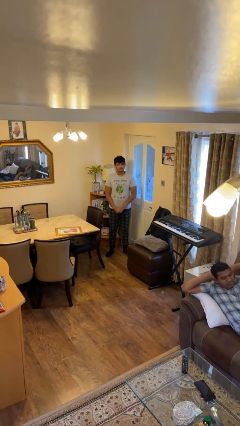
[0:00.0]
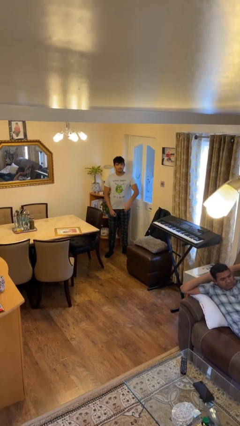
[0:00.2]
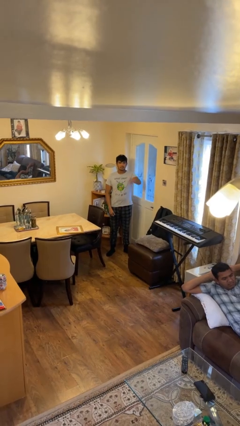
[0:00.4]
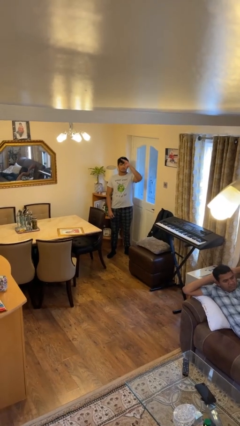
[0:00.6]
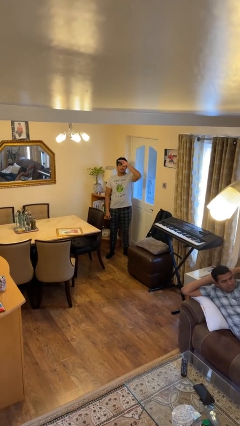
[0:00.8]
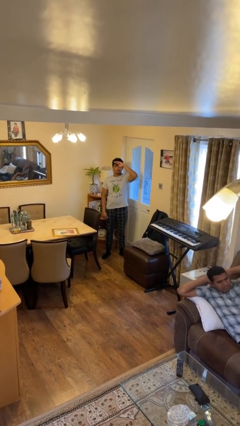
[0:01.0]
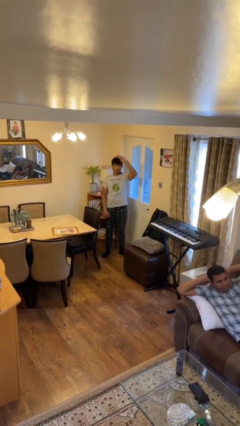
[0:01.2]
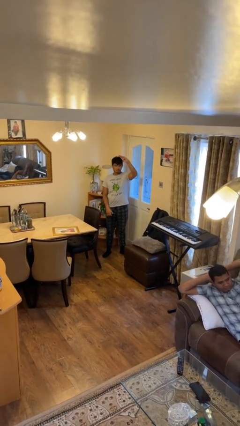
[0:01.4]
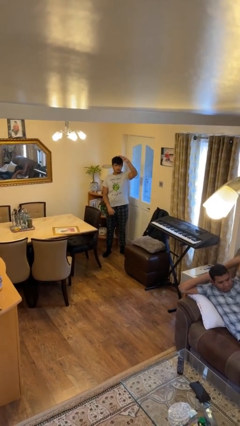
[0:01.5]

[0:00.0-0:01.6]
person salutes

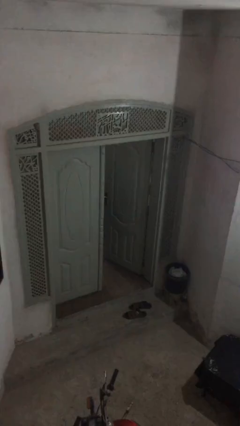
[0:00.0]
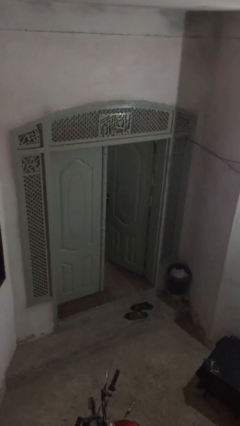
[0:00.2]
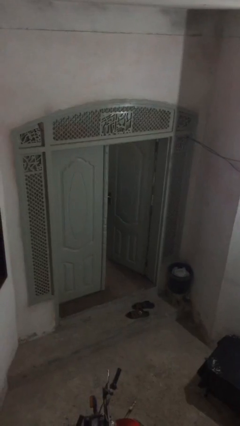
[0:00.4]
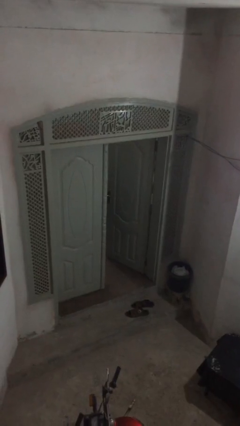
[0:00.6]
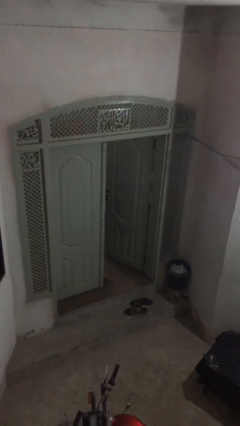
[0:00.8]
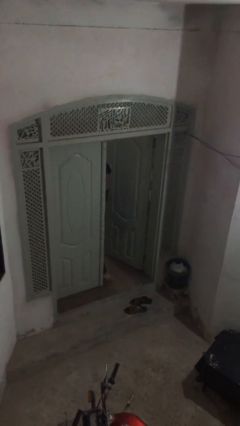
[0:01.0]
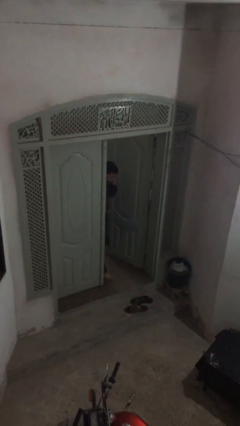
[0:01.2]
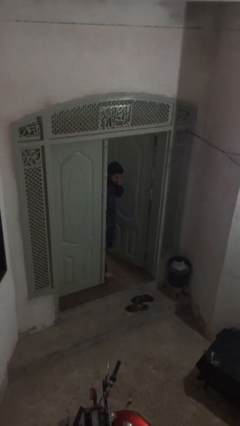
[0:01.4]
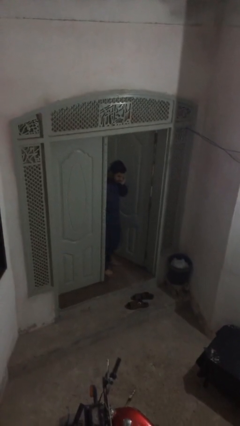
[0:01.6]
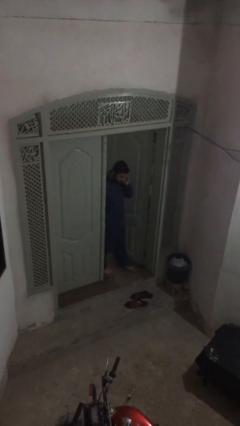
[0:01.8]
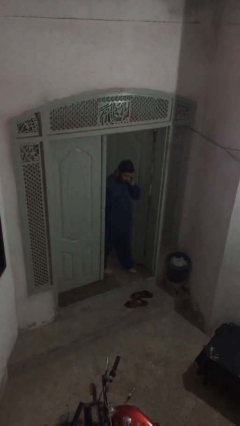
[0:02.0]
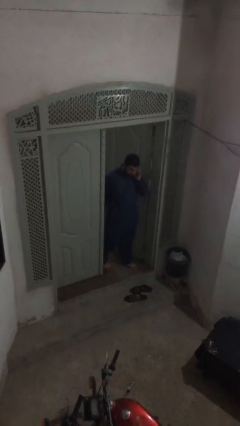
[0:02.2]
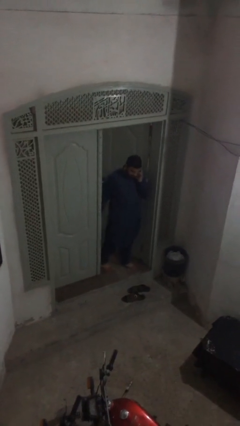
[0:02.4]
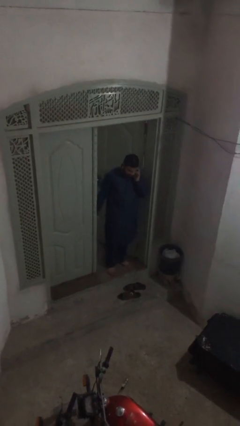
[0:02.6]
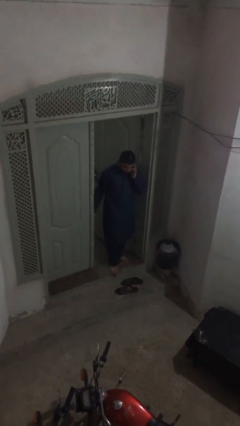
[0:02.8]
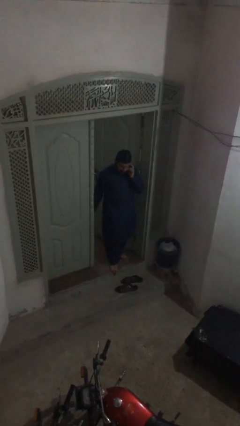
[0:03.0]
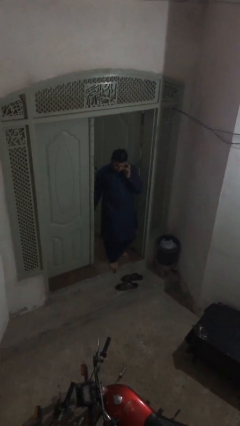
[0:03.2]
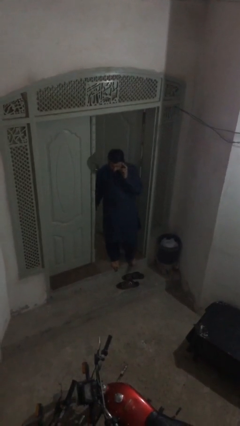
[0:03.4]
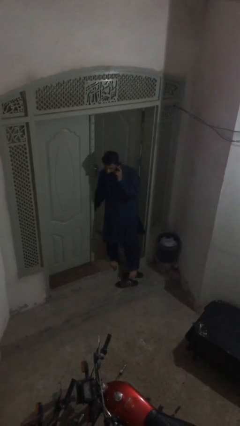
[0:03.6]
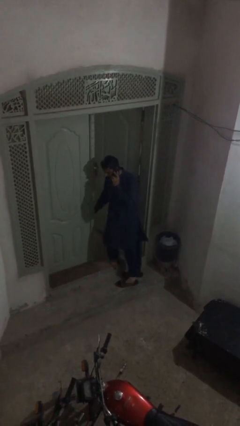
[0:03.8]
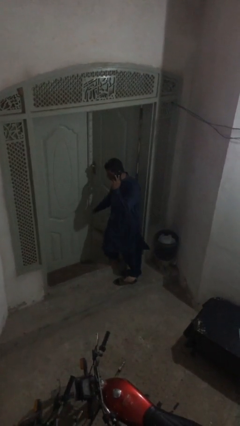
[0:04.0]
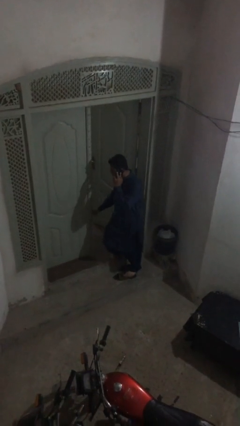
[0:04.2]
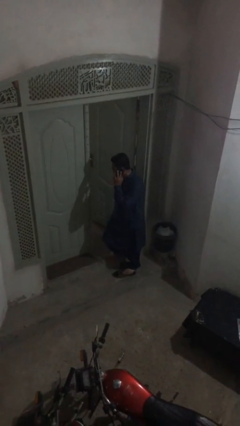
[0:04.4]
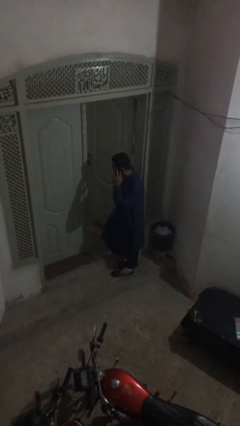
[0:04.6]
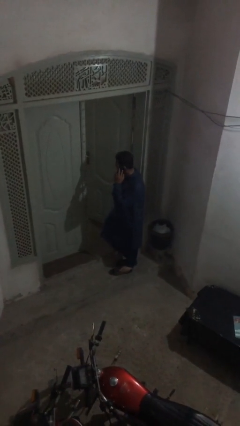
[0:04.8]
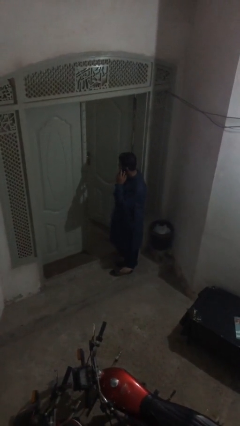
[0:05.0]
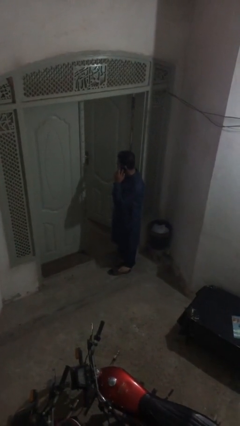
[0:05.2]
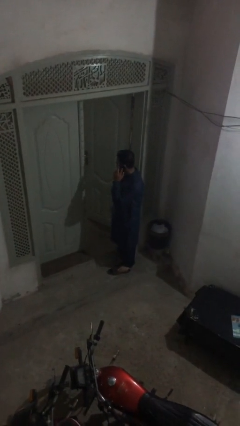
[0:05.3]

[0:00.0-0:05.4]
person enters scene through structure

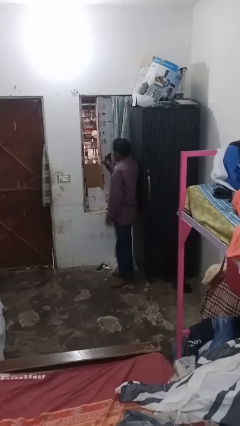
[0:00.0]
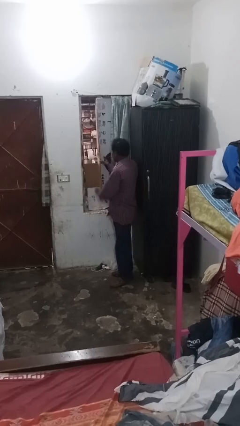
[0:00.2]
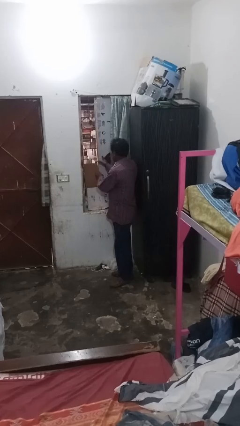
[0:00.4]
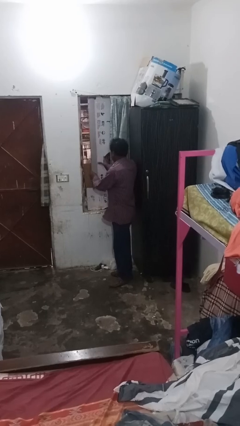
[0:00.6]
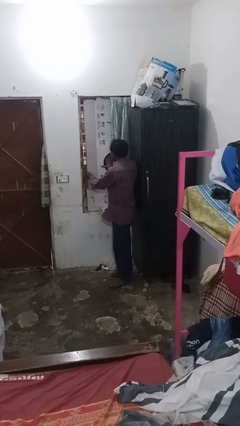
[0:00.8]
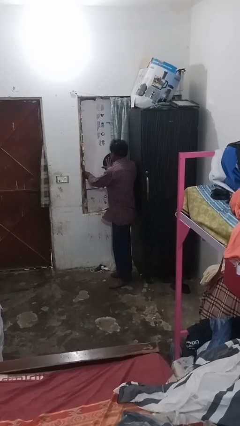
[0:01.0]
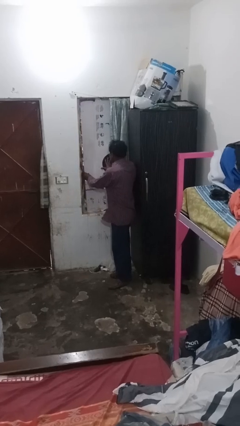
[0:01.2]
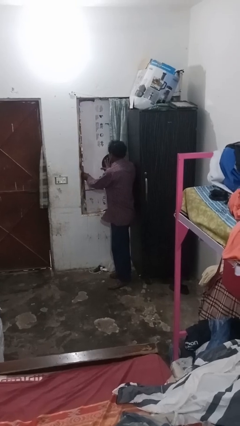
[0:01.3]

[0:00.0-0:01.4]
person closes home window

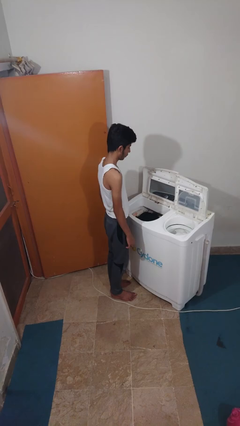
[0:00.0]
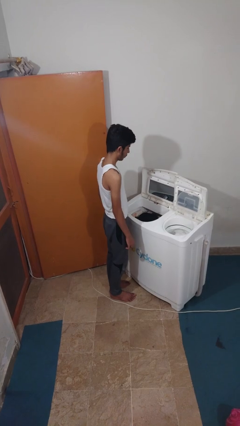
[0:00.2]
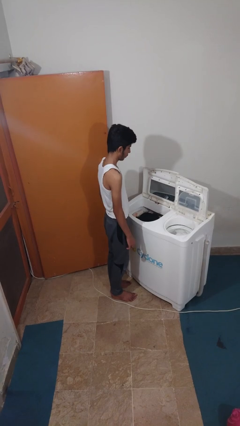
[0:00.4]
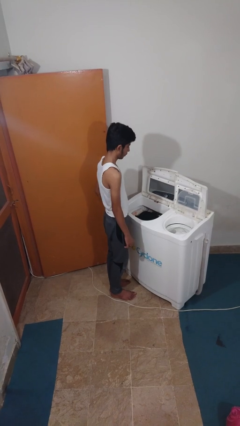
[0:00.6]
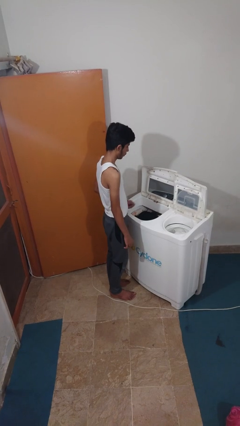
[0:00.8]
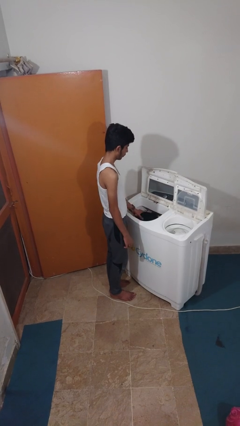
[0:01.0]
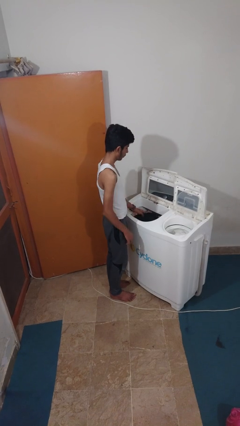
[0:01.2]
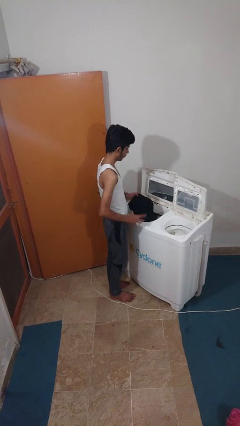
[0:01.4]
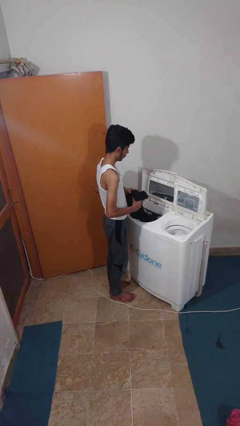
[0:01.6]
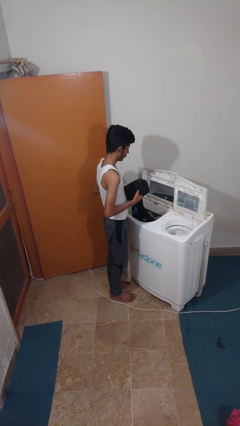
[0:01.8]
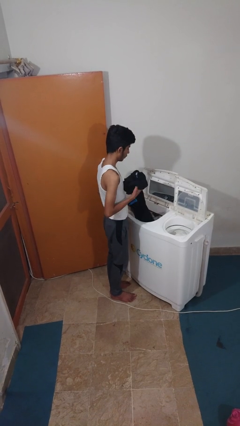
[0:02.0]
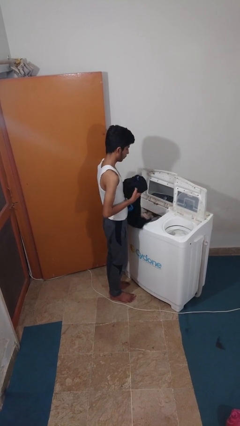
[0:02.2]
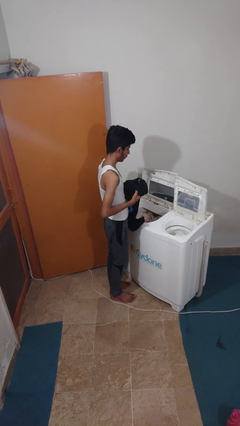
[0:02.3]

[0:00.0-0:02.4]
person unloads clotheswasher

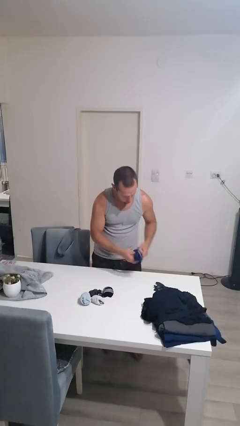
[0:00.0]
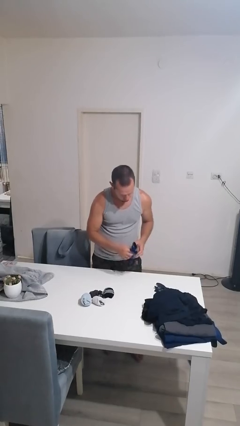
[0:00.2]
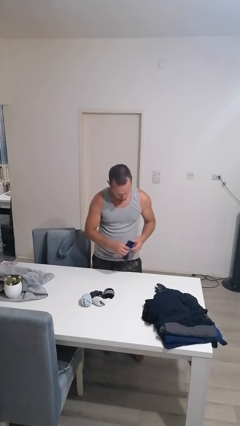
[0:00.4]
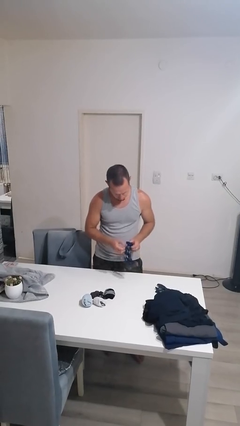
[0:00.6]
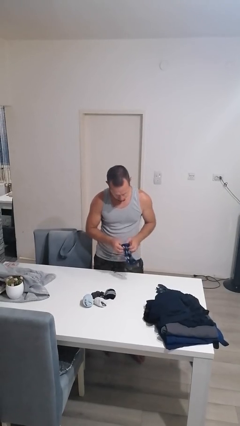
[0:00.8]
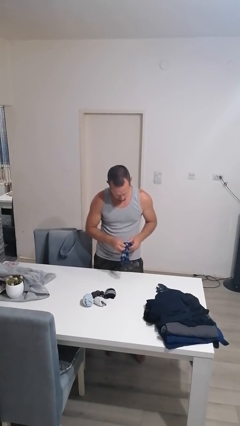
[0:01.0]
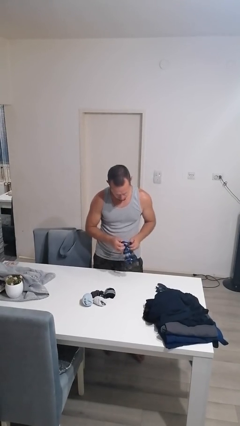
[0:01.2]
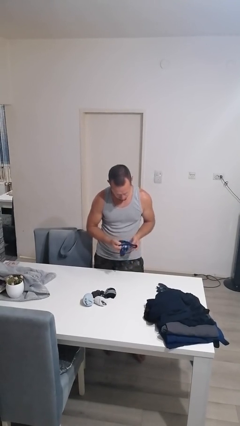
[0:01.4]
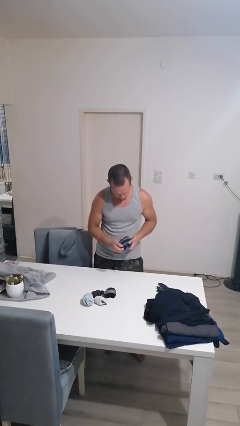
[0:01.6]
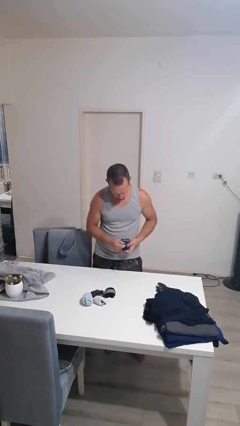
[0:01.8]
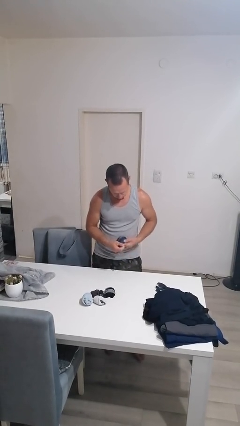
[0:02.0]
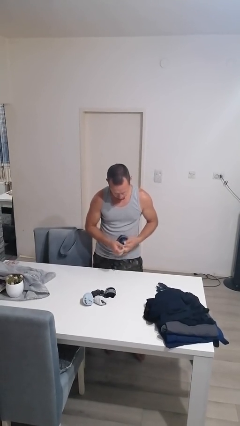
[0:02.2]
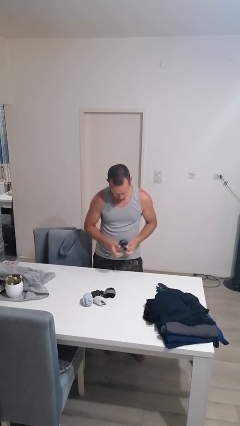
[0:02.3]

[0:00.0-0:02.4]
person folds socks

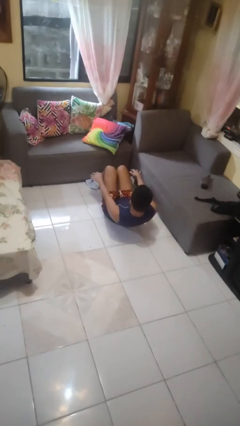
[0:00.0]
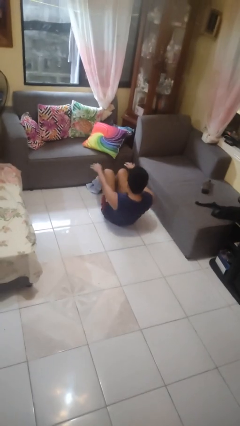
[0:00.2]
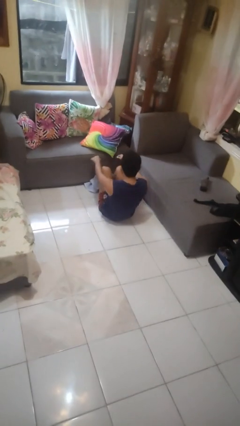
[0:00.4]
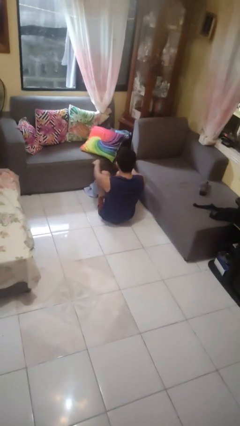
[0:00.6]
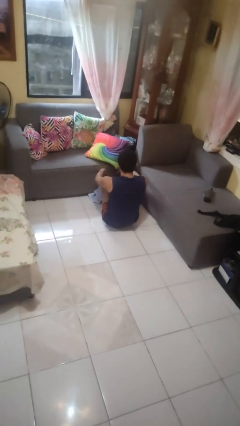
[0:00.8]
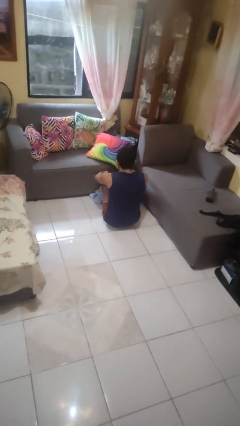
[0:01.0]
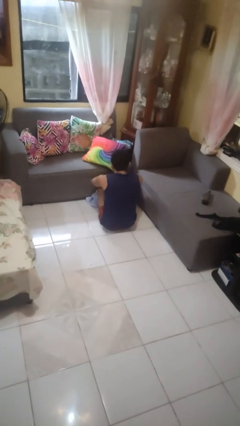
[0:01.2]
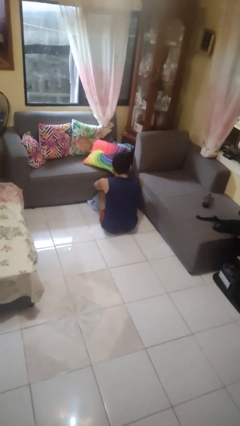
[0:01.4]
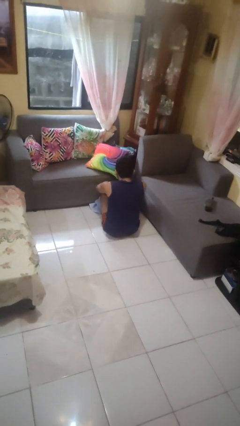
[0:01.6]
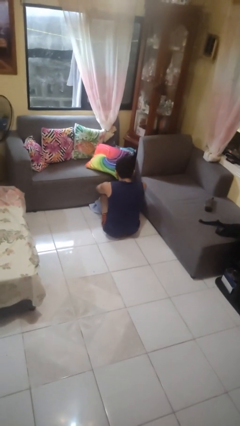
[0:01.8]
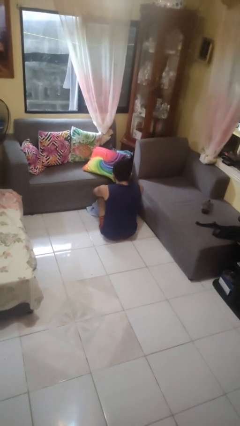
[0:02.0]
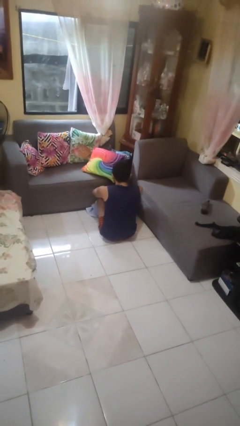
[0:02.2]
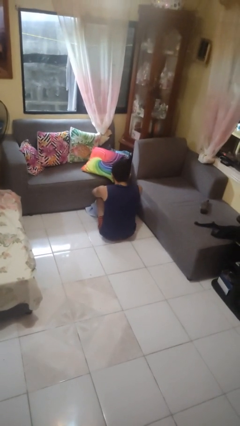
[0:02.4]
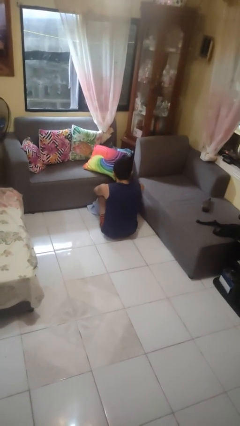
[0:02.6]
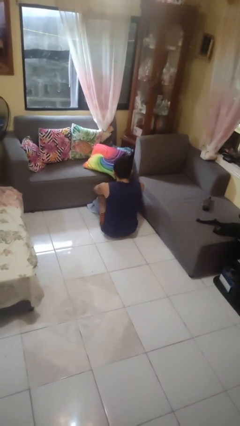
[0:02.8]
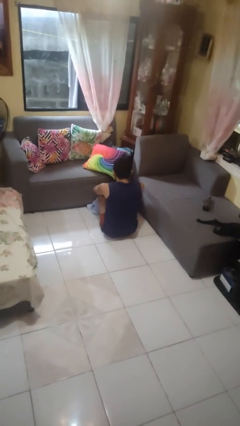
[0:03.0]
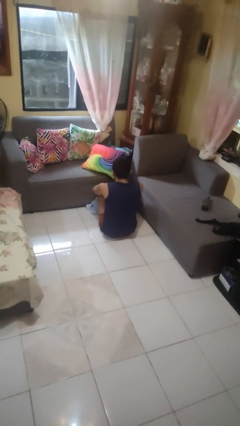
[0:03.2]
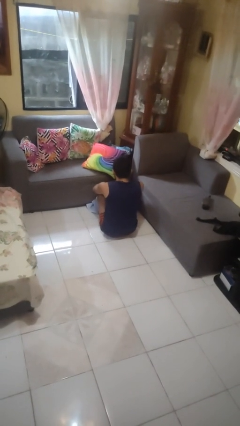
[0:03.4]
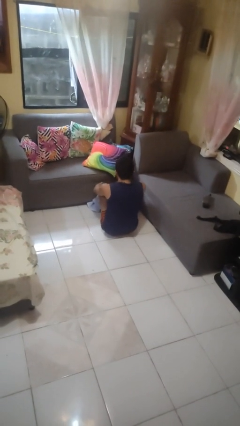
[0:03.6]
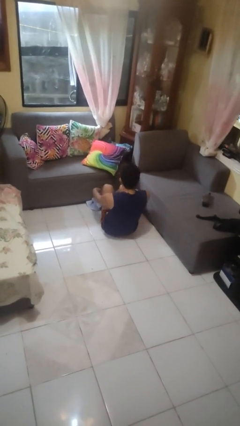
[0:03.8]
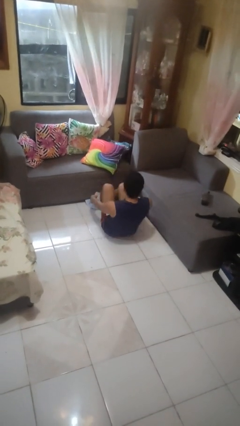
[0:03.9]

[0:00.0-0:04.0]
person exercises with situp
